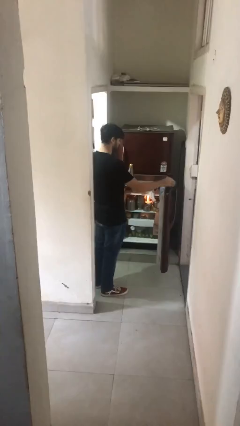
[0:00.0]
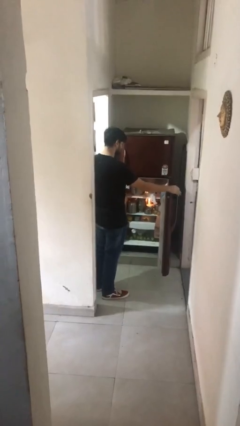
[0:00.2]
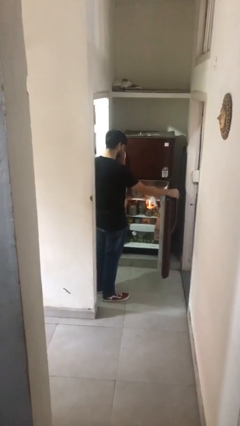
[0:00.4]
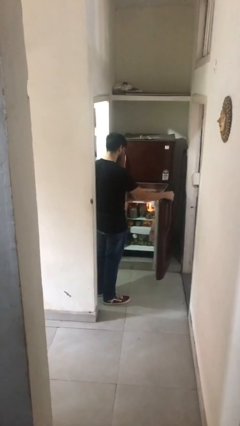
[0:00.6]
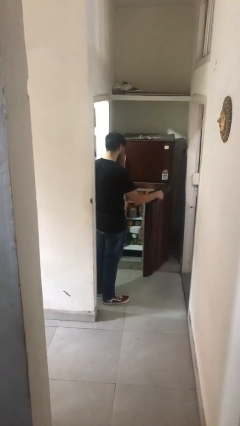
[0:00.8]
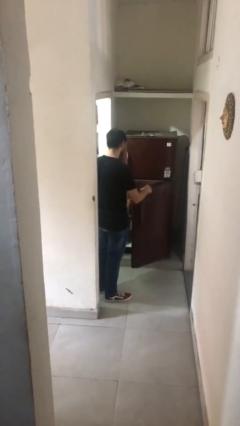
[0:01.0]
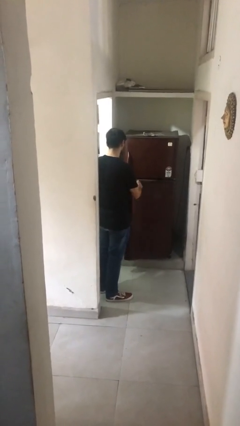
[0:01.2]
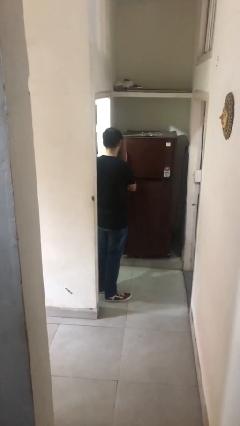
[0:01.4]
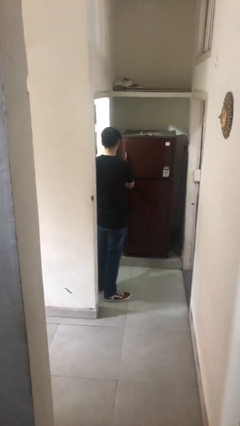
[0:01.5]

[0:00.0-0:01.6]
person closes refrigerator

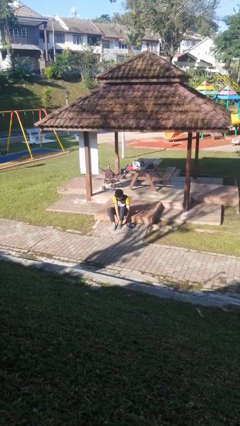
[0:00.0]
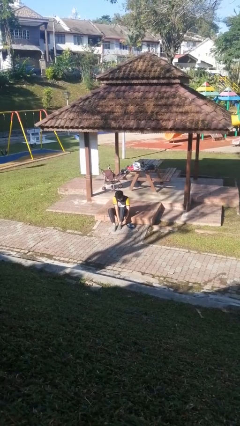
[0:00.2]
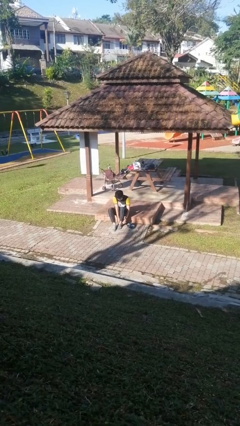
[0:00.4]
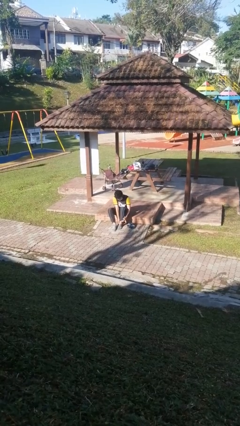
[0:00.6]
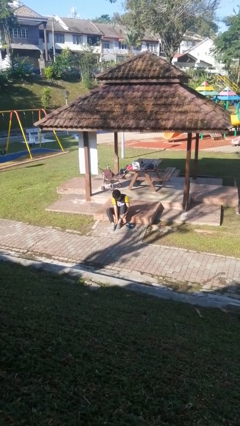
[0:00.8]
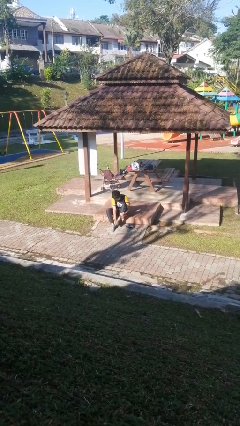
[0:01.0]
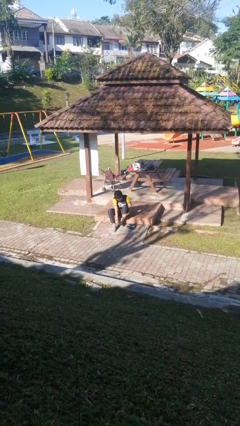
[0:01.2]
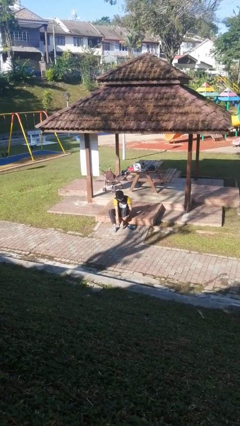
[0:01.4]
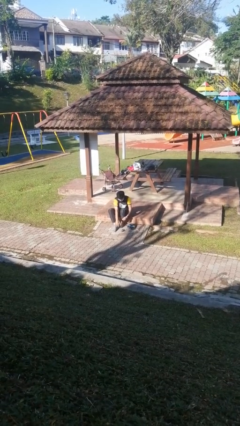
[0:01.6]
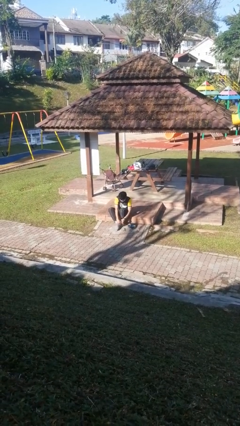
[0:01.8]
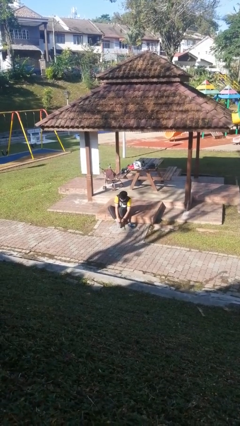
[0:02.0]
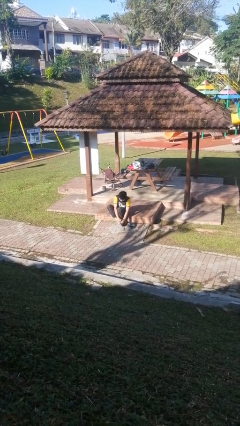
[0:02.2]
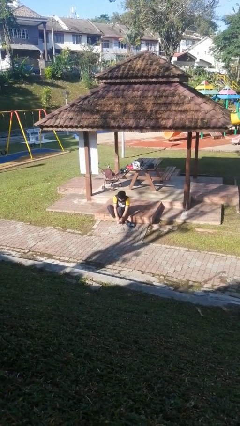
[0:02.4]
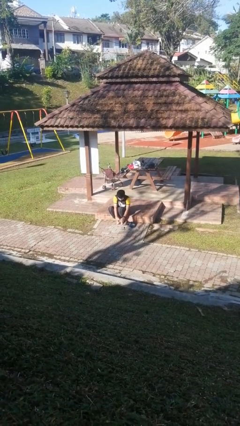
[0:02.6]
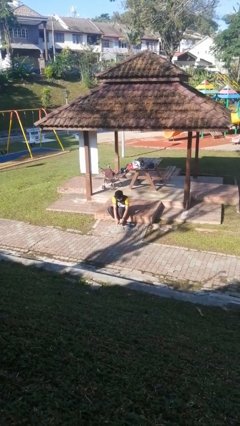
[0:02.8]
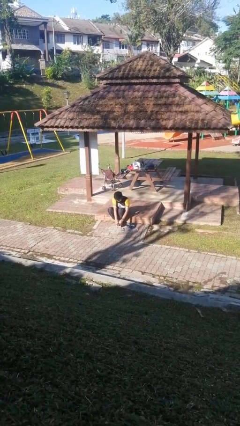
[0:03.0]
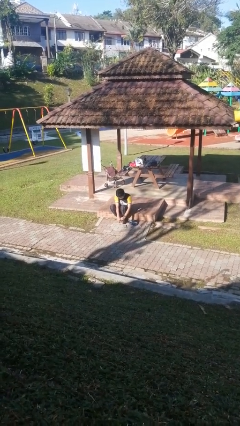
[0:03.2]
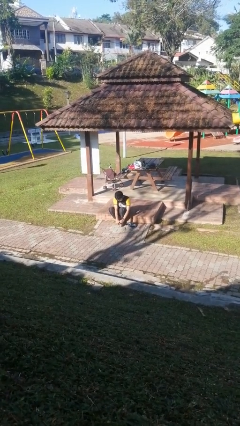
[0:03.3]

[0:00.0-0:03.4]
person takes off socks

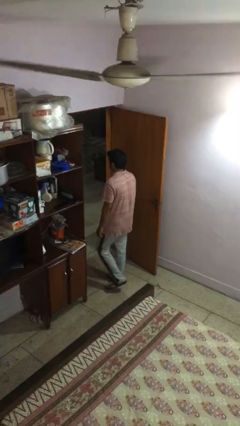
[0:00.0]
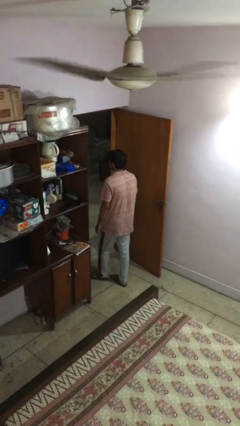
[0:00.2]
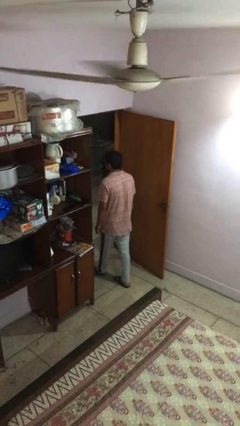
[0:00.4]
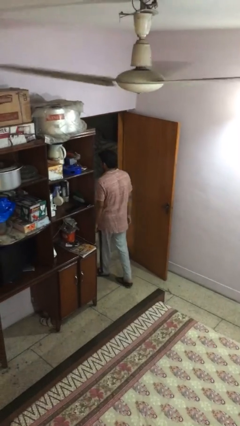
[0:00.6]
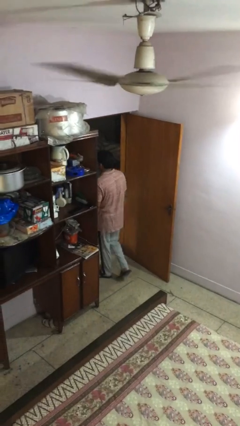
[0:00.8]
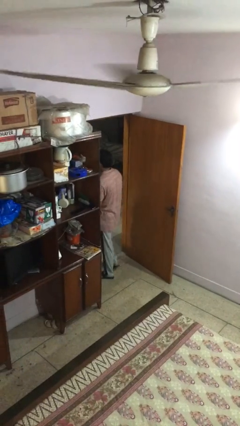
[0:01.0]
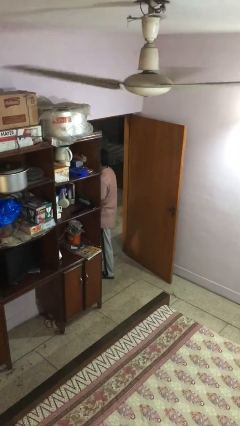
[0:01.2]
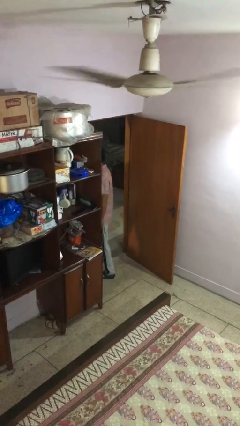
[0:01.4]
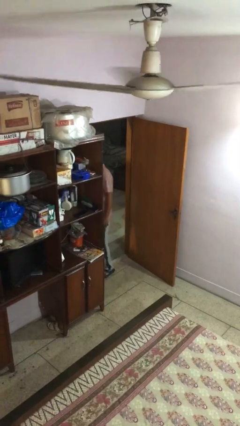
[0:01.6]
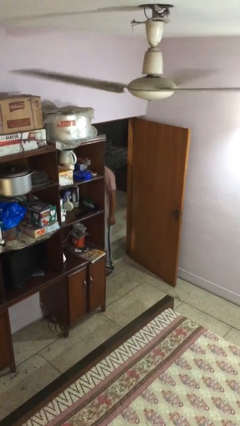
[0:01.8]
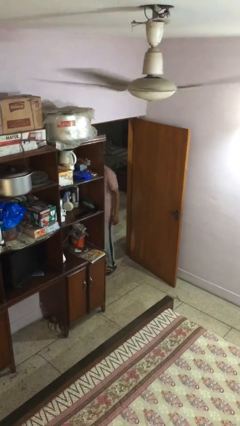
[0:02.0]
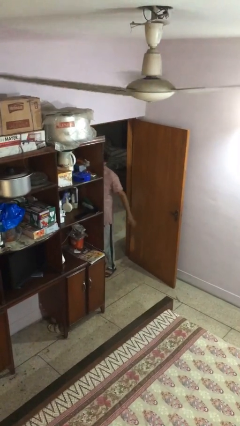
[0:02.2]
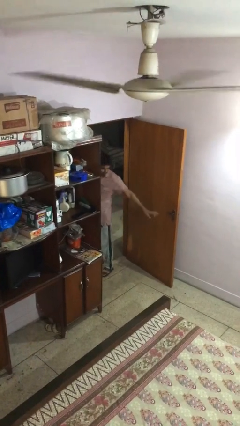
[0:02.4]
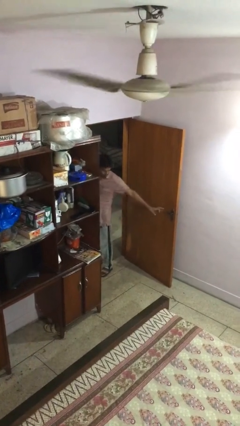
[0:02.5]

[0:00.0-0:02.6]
person exits scene through structure

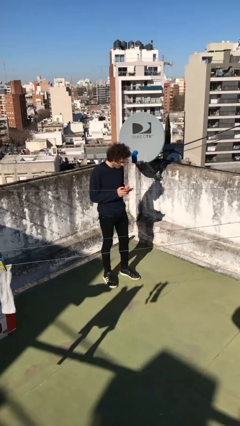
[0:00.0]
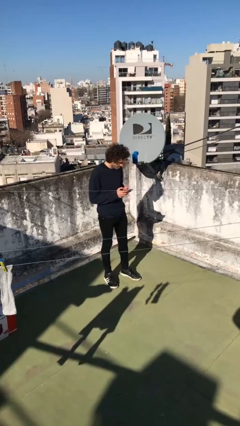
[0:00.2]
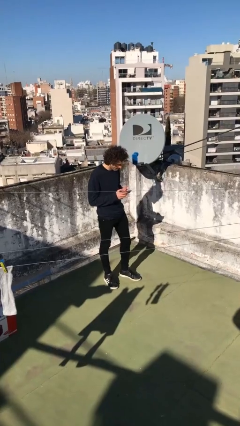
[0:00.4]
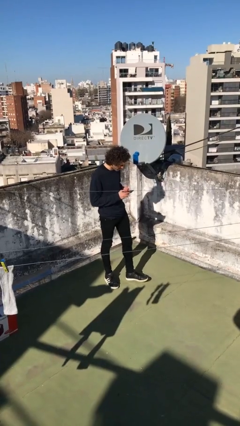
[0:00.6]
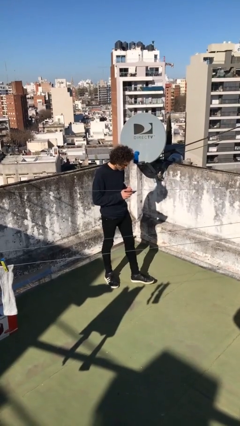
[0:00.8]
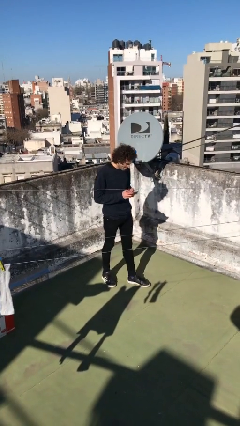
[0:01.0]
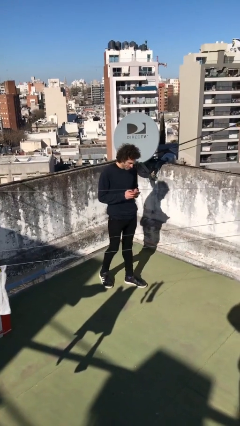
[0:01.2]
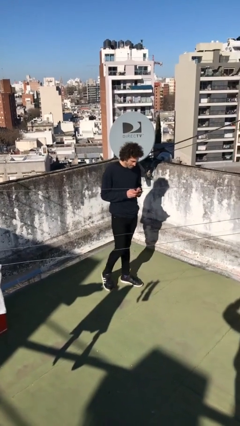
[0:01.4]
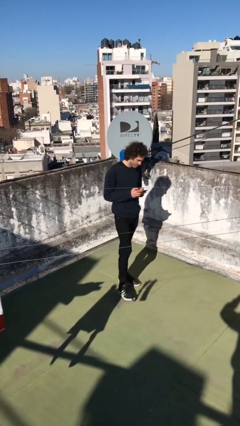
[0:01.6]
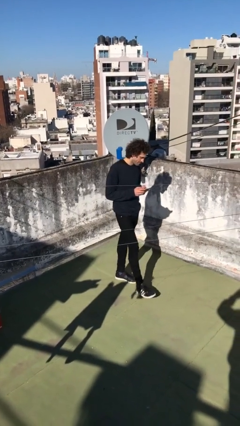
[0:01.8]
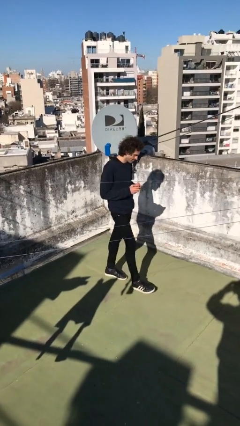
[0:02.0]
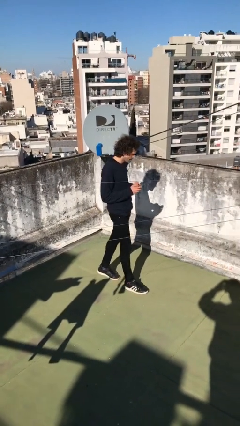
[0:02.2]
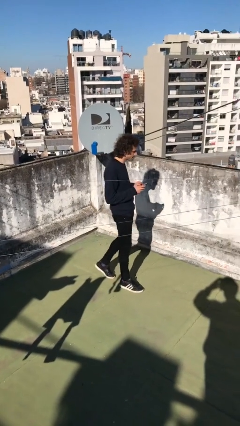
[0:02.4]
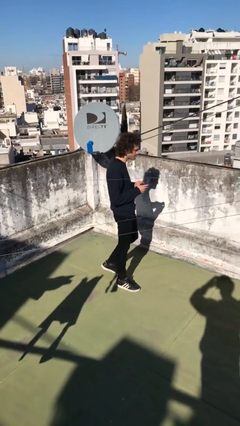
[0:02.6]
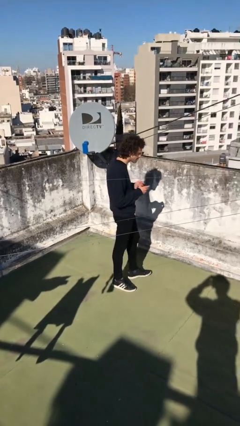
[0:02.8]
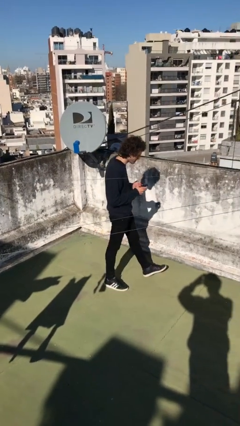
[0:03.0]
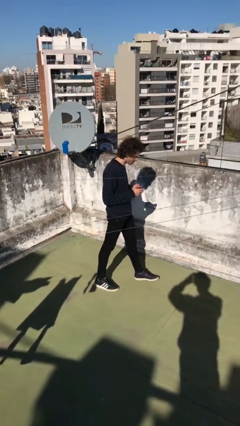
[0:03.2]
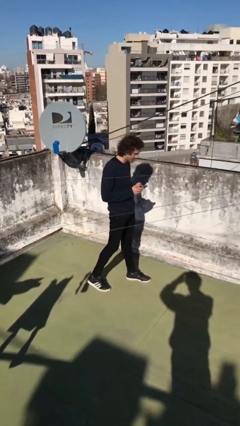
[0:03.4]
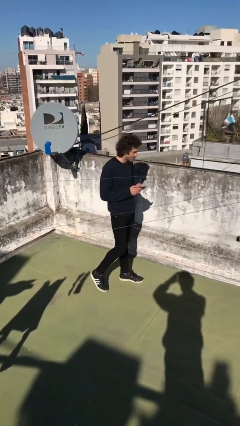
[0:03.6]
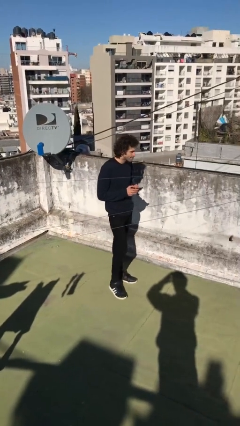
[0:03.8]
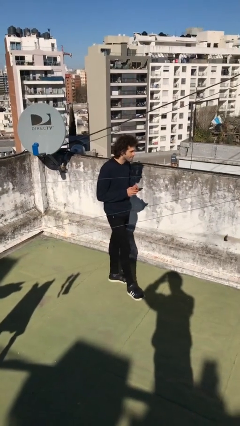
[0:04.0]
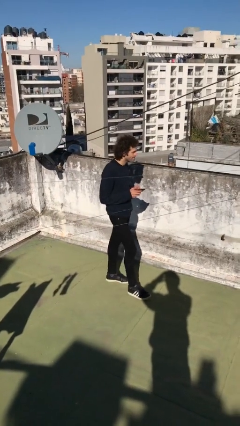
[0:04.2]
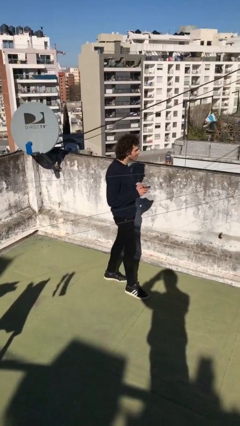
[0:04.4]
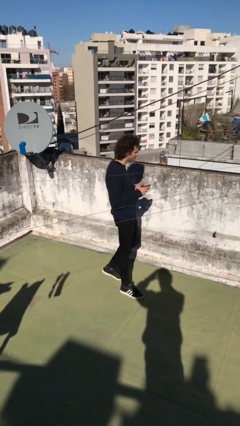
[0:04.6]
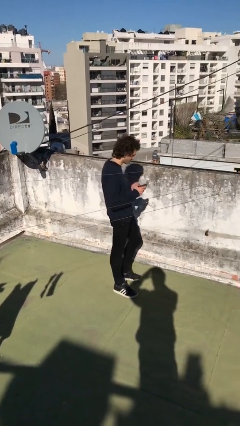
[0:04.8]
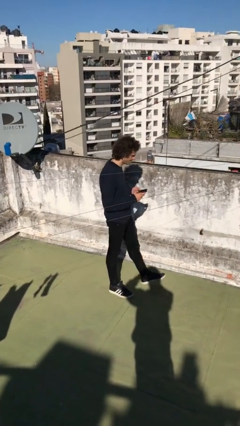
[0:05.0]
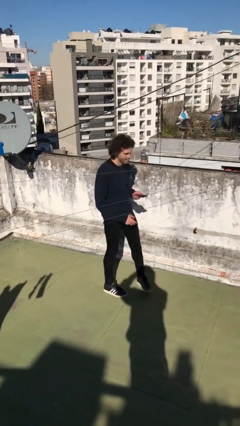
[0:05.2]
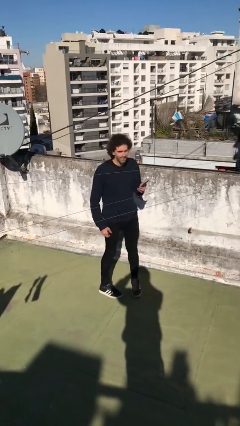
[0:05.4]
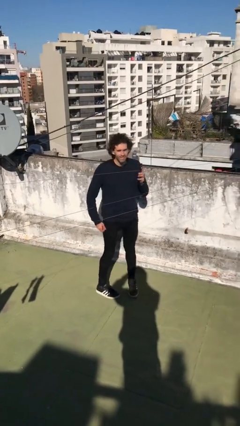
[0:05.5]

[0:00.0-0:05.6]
person texts on phone

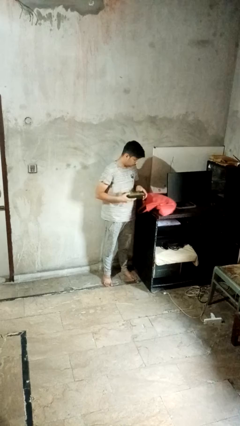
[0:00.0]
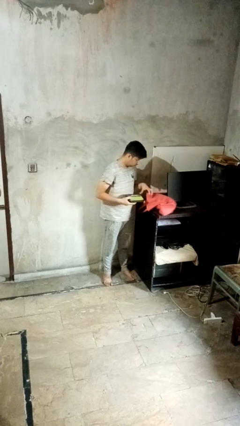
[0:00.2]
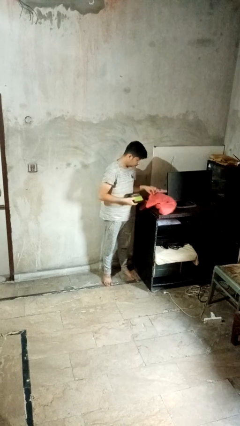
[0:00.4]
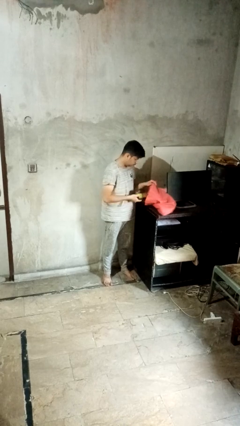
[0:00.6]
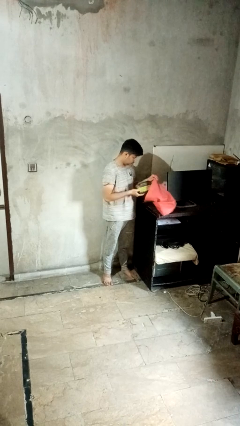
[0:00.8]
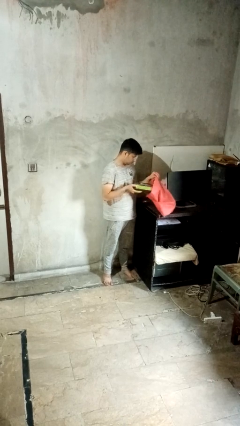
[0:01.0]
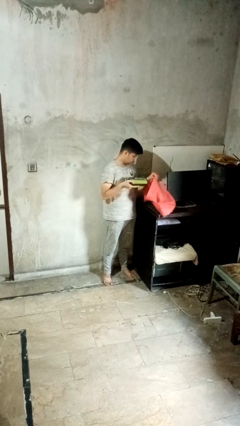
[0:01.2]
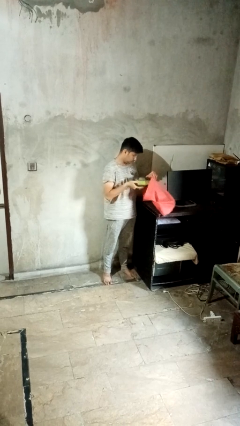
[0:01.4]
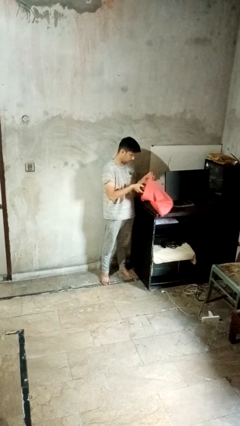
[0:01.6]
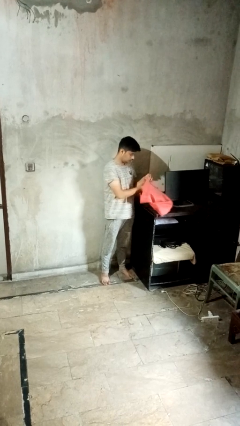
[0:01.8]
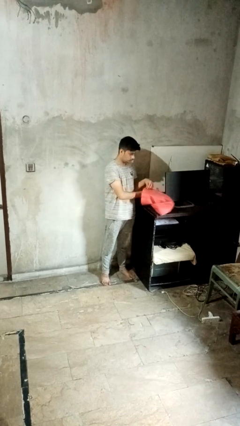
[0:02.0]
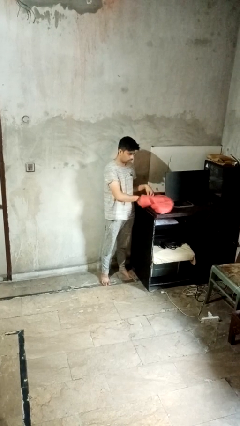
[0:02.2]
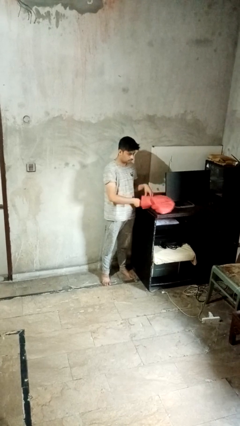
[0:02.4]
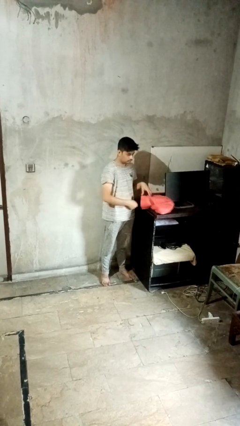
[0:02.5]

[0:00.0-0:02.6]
person puts object into bag

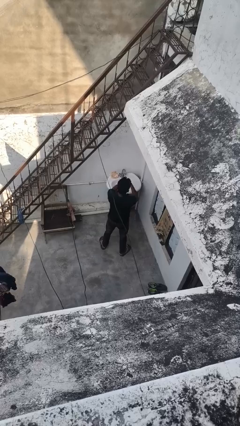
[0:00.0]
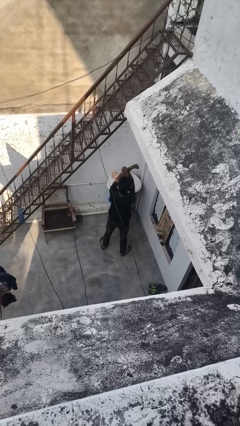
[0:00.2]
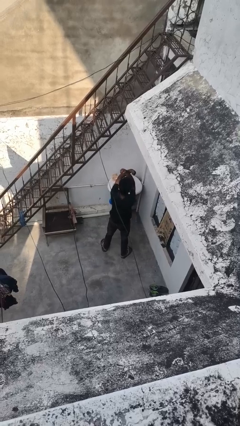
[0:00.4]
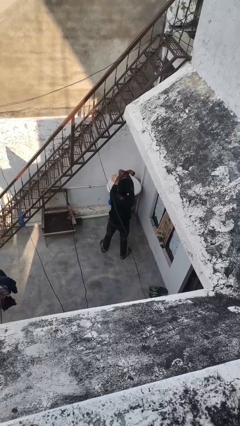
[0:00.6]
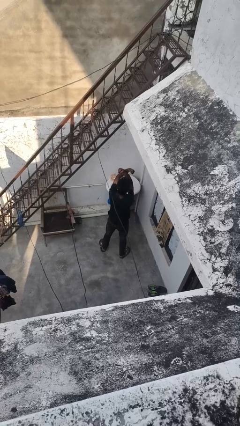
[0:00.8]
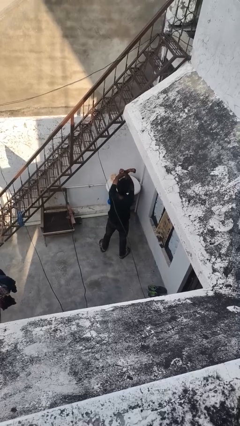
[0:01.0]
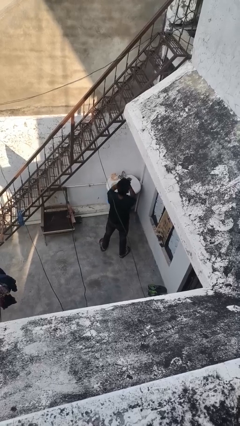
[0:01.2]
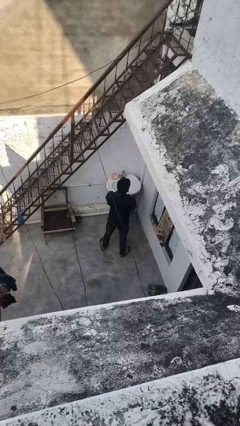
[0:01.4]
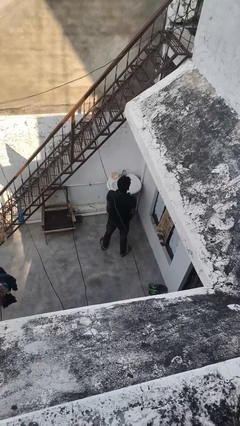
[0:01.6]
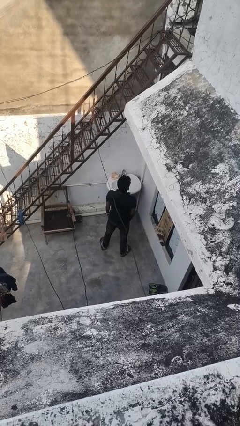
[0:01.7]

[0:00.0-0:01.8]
person gestures arms x
